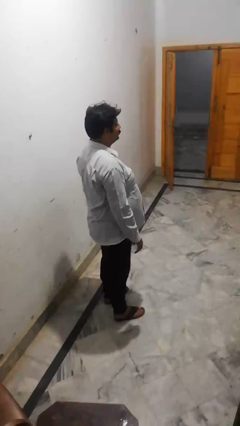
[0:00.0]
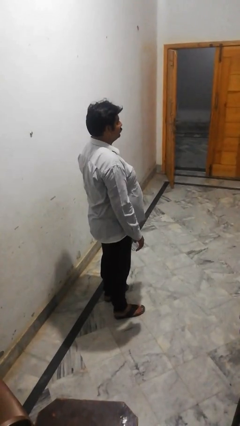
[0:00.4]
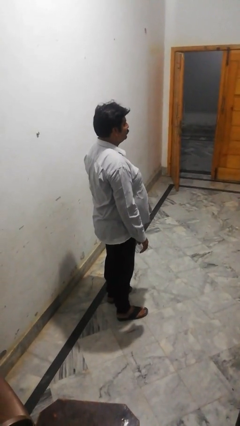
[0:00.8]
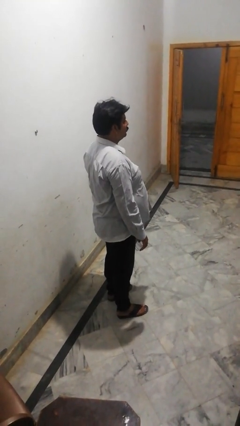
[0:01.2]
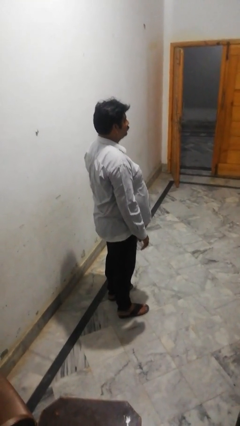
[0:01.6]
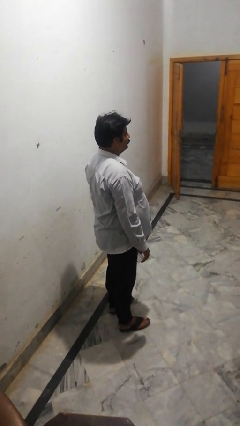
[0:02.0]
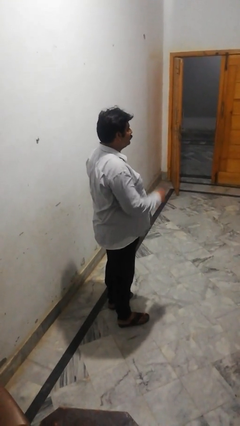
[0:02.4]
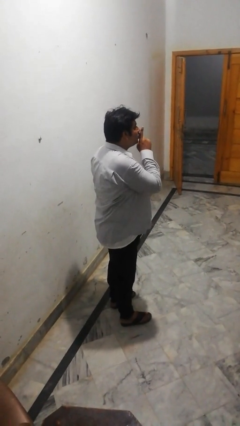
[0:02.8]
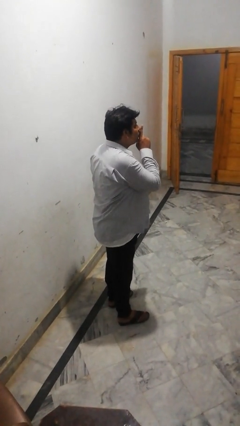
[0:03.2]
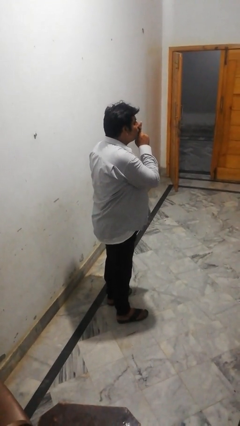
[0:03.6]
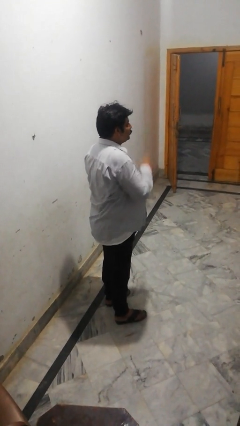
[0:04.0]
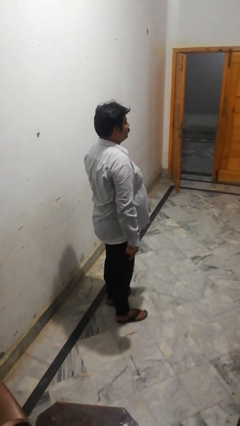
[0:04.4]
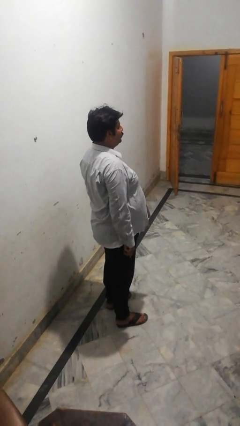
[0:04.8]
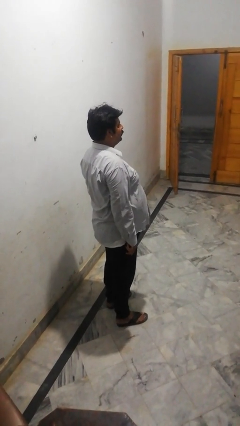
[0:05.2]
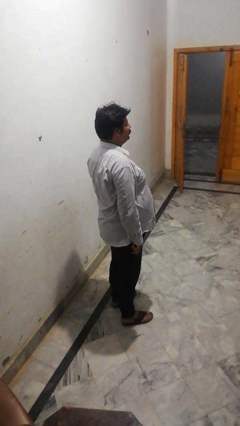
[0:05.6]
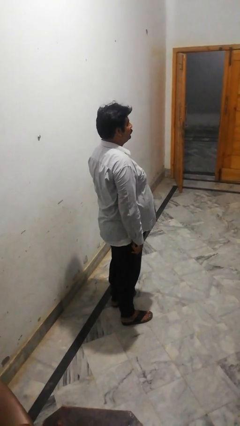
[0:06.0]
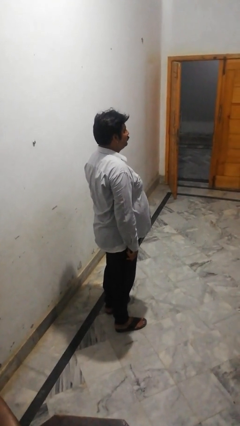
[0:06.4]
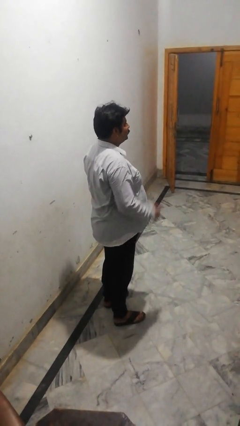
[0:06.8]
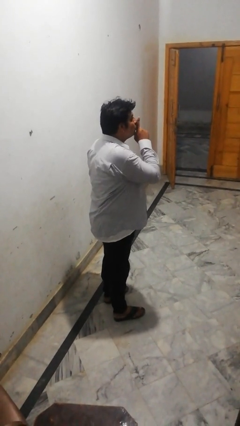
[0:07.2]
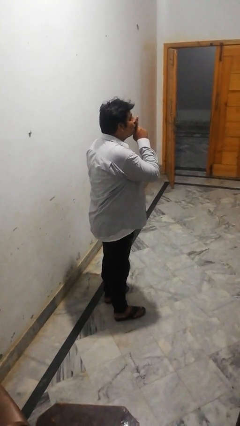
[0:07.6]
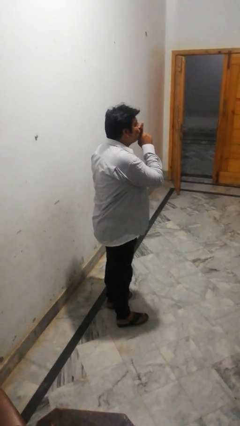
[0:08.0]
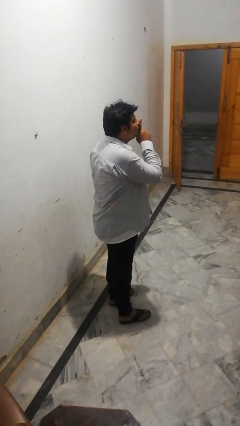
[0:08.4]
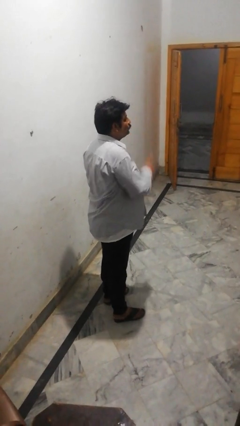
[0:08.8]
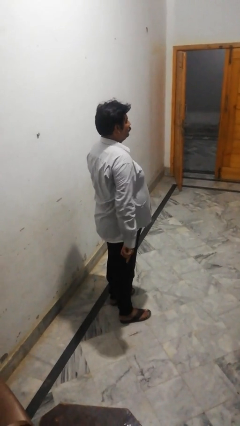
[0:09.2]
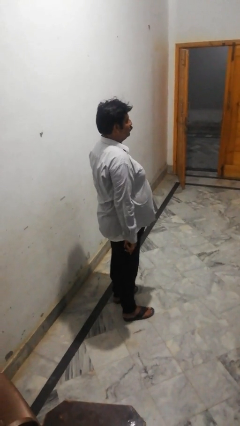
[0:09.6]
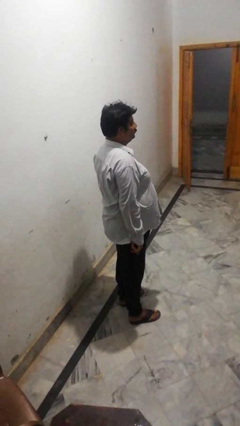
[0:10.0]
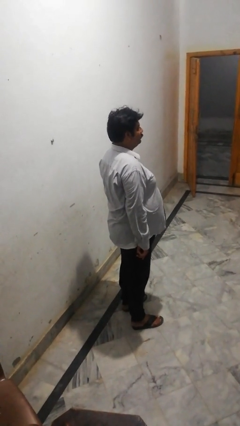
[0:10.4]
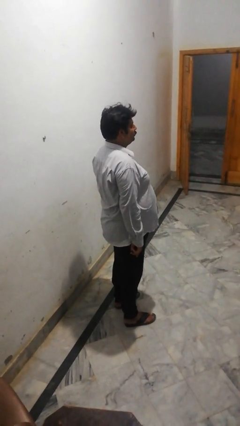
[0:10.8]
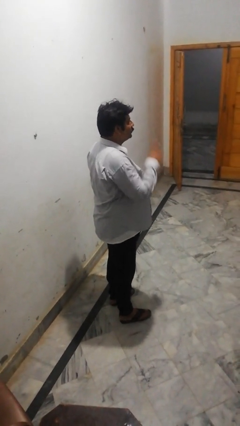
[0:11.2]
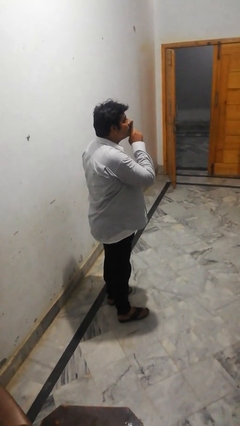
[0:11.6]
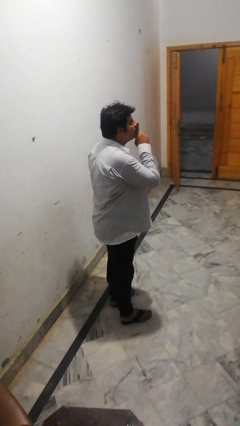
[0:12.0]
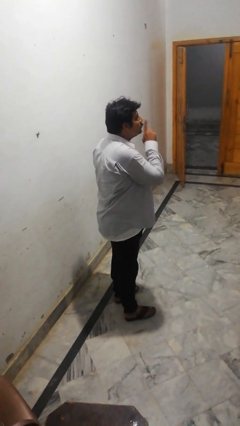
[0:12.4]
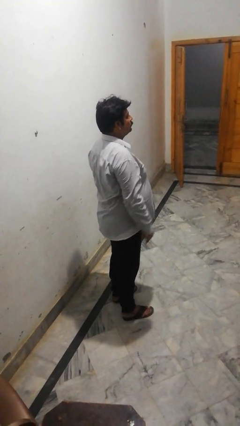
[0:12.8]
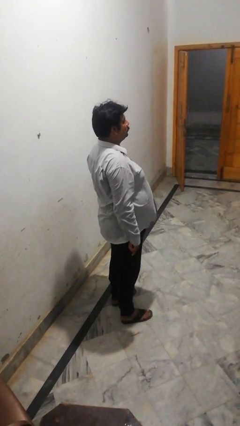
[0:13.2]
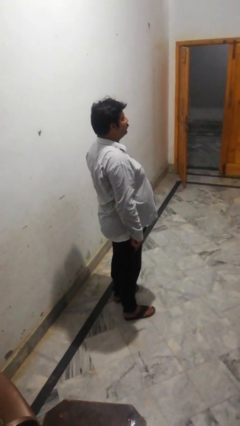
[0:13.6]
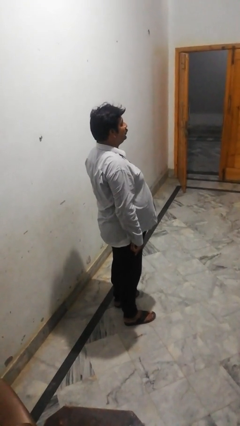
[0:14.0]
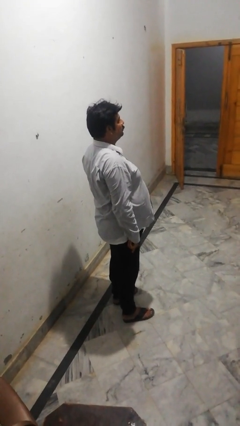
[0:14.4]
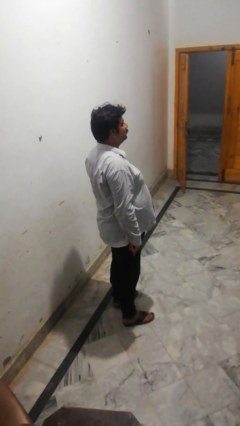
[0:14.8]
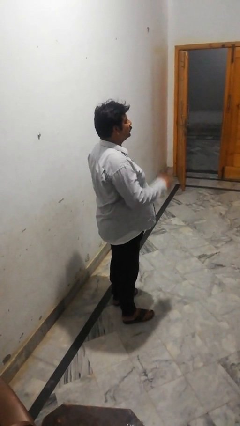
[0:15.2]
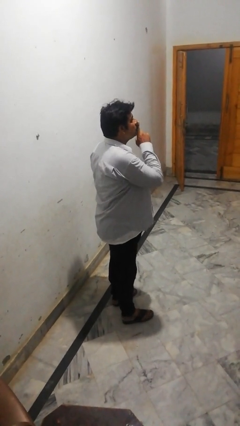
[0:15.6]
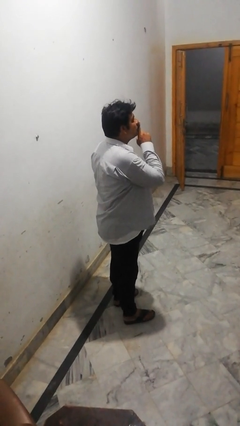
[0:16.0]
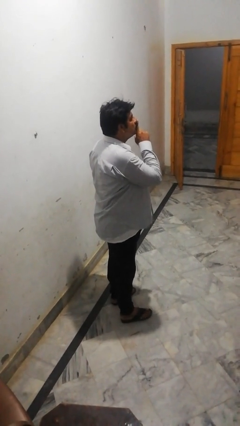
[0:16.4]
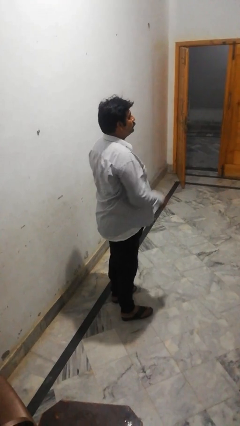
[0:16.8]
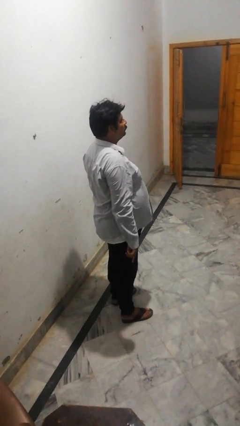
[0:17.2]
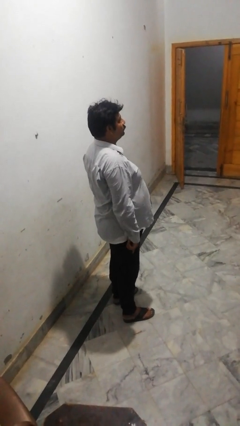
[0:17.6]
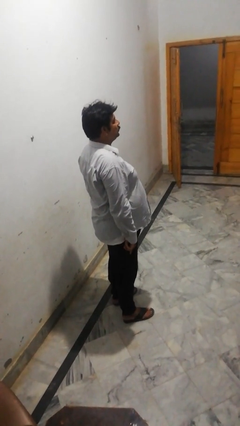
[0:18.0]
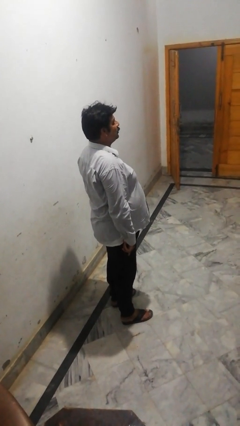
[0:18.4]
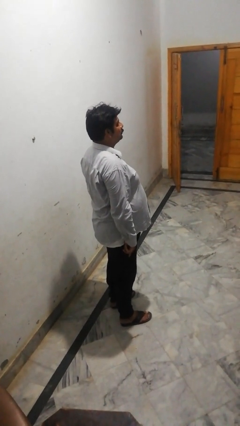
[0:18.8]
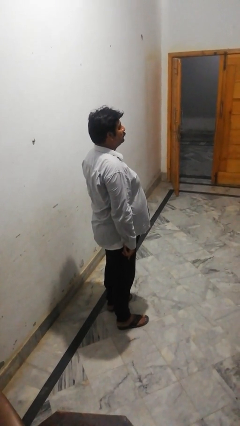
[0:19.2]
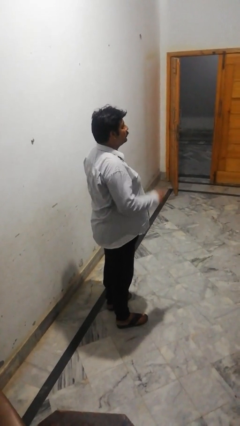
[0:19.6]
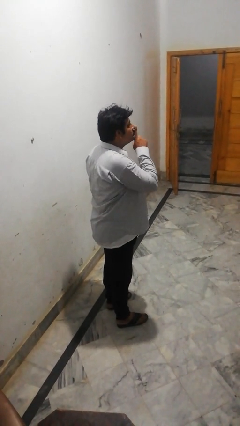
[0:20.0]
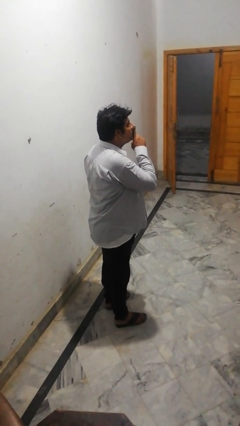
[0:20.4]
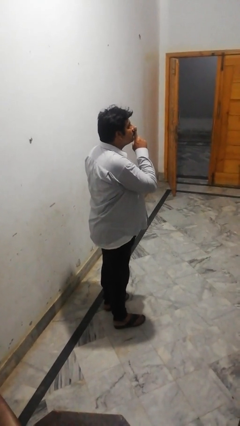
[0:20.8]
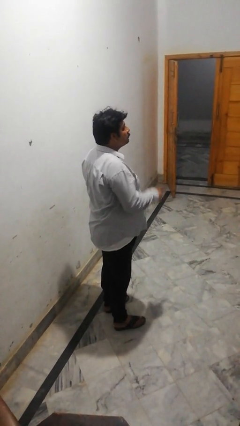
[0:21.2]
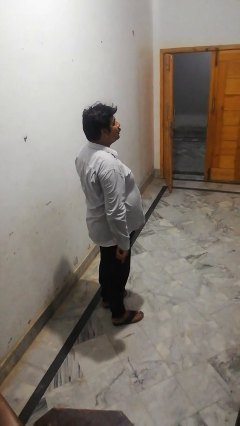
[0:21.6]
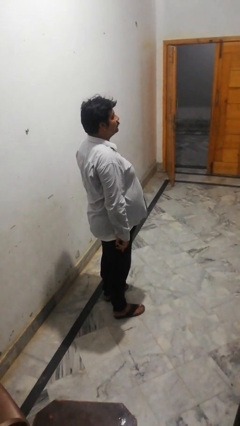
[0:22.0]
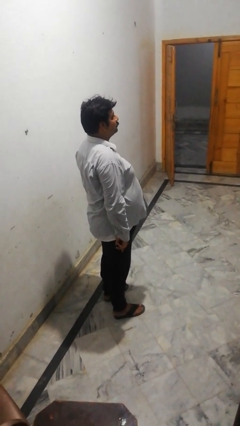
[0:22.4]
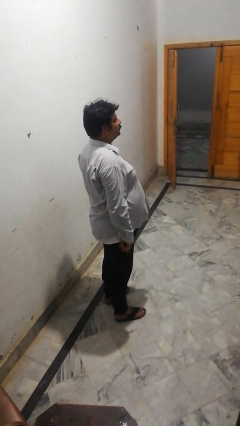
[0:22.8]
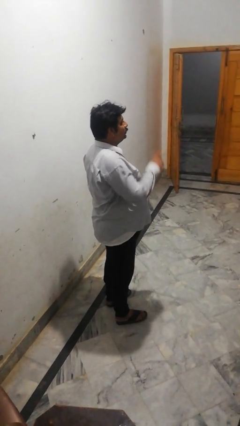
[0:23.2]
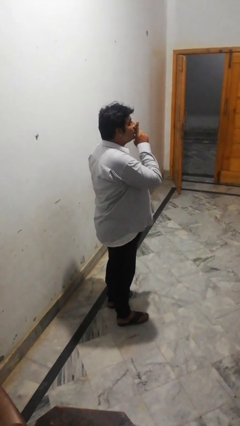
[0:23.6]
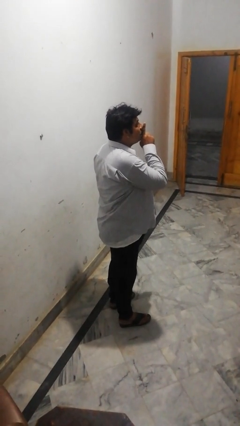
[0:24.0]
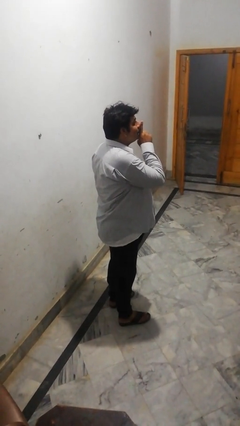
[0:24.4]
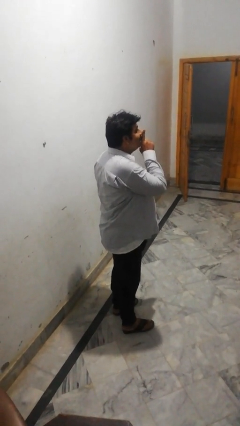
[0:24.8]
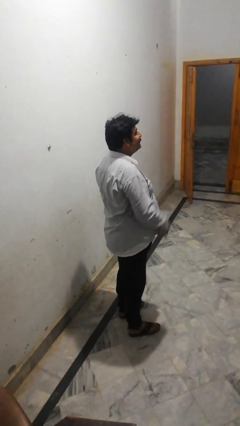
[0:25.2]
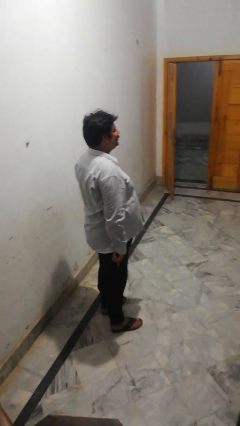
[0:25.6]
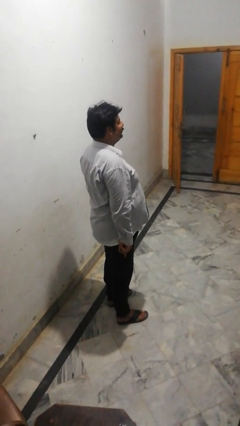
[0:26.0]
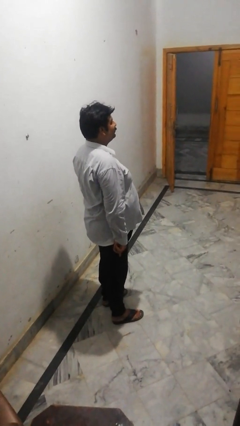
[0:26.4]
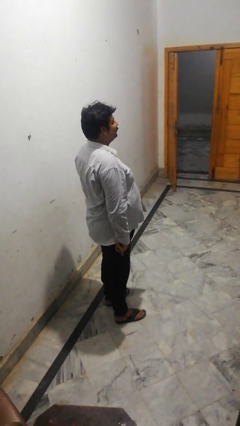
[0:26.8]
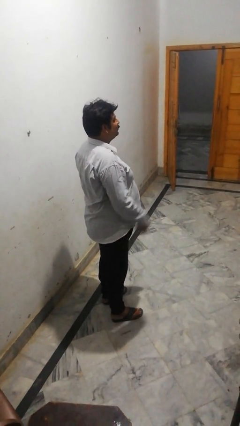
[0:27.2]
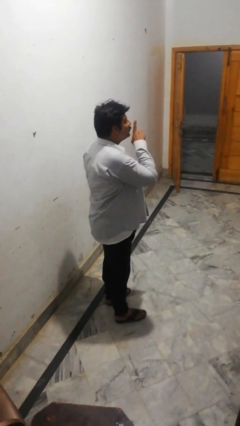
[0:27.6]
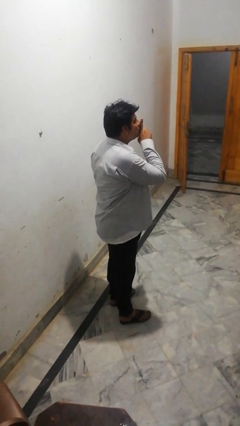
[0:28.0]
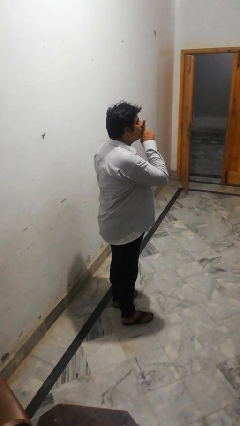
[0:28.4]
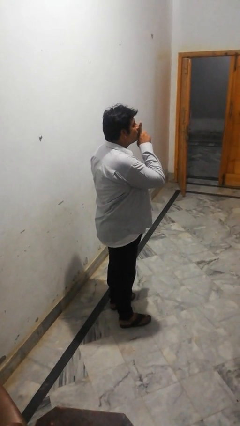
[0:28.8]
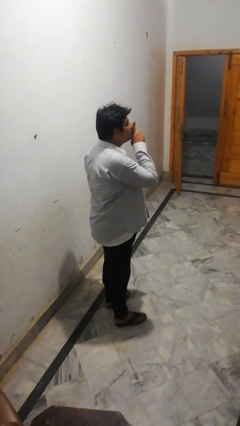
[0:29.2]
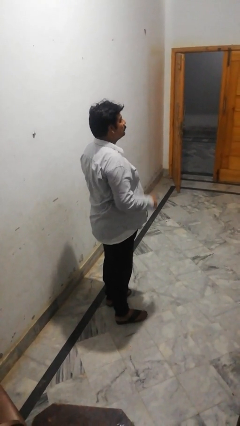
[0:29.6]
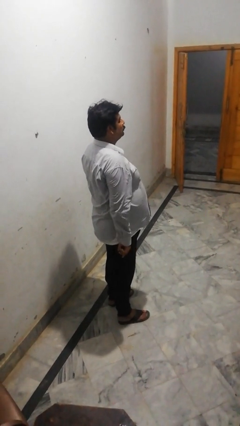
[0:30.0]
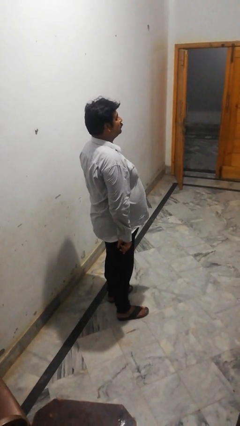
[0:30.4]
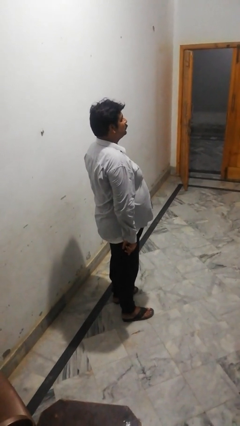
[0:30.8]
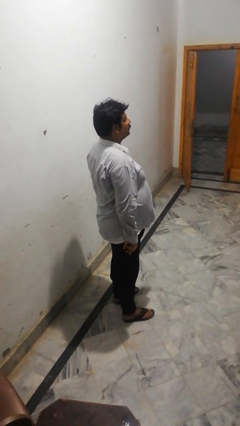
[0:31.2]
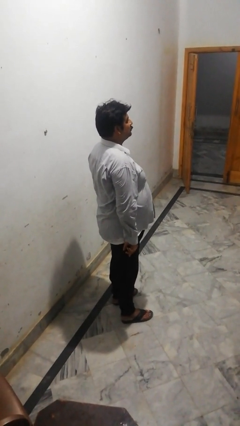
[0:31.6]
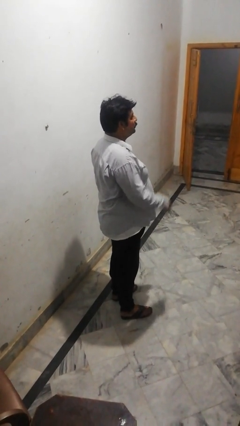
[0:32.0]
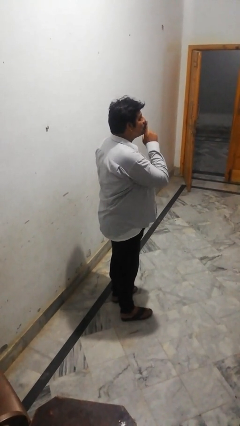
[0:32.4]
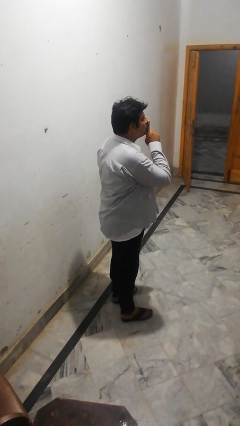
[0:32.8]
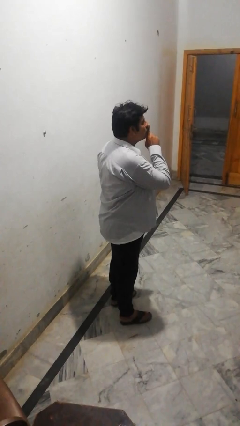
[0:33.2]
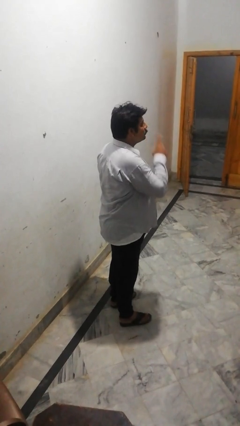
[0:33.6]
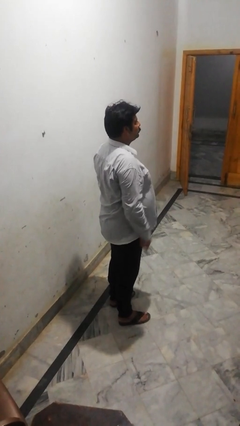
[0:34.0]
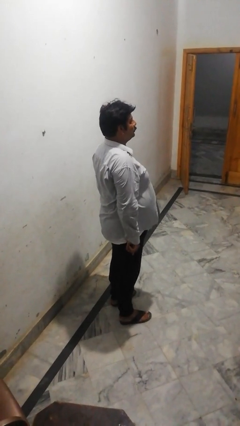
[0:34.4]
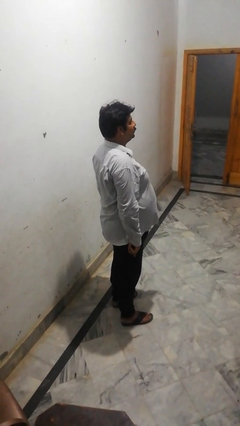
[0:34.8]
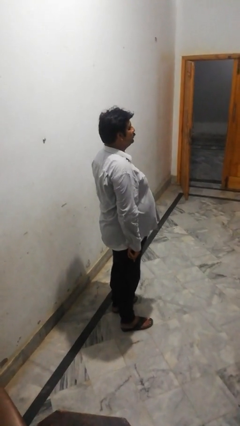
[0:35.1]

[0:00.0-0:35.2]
person gestures be quiet

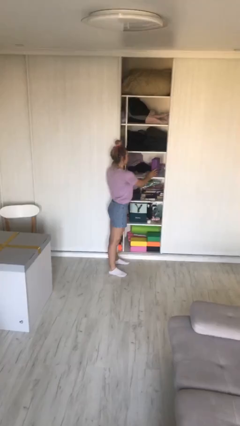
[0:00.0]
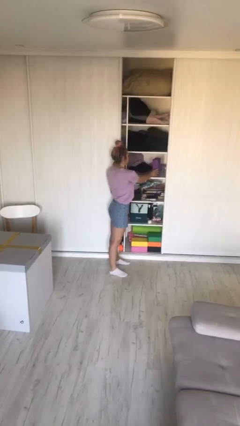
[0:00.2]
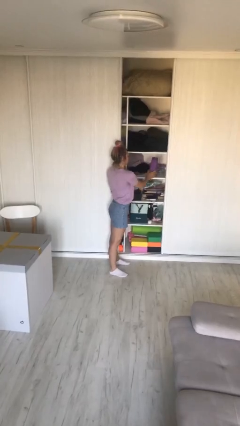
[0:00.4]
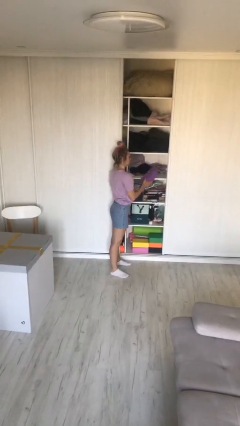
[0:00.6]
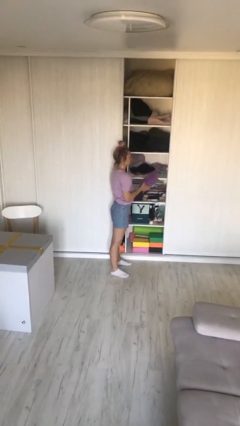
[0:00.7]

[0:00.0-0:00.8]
person picks up object from cabinet
